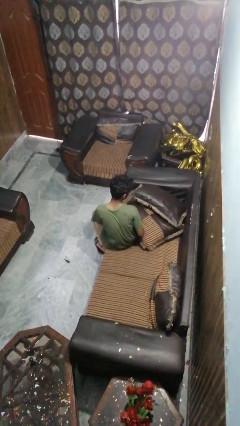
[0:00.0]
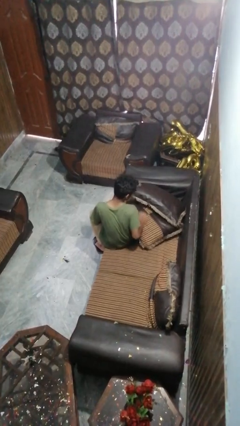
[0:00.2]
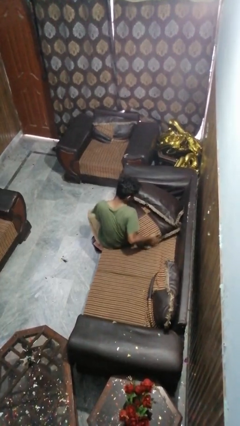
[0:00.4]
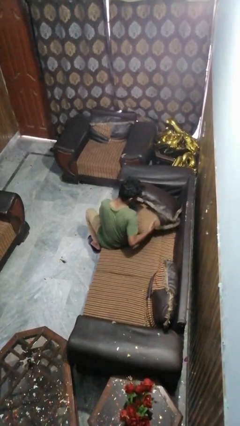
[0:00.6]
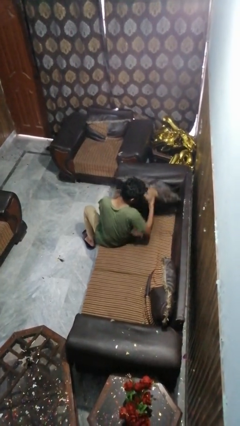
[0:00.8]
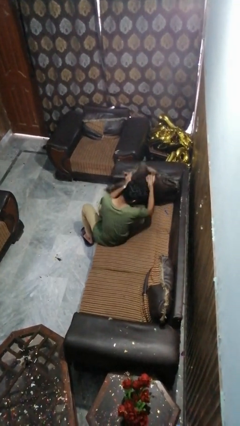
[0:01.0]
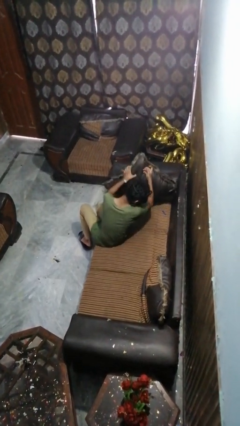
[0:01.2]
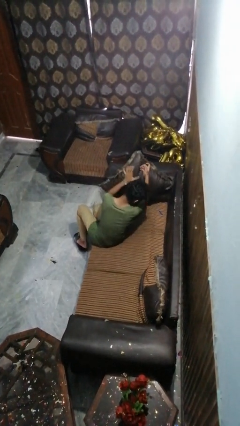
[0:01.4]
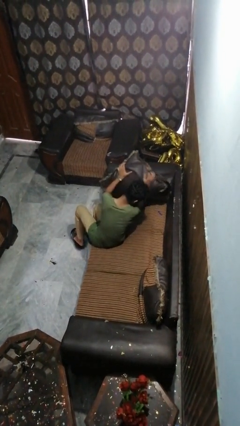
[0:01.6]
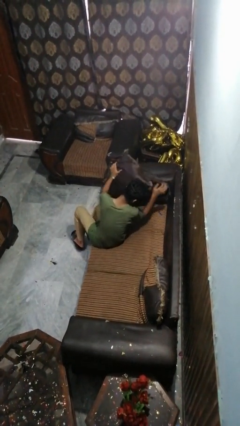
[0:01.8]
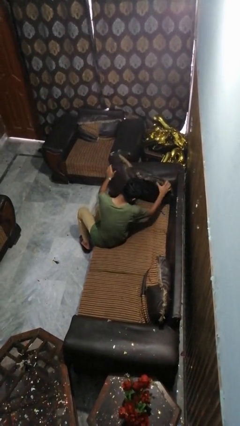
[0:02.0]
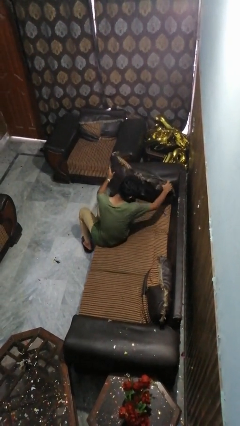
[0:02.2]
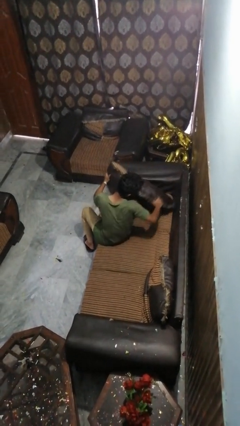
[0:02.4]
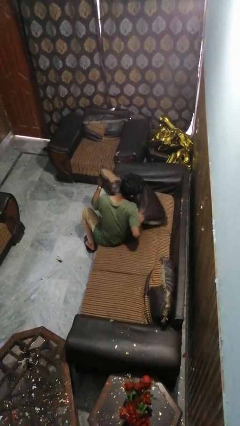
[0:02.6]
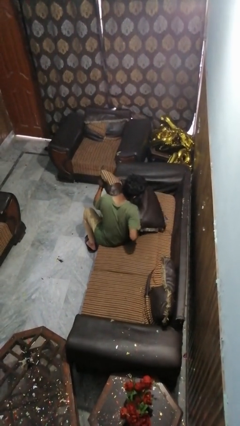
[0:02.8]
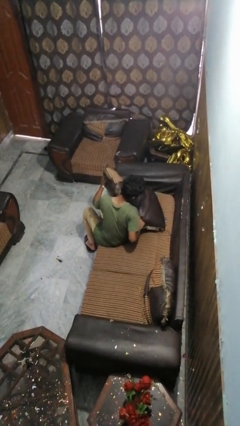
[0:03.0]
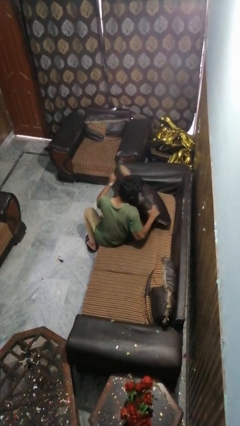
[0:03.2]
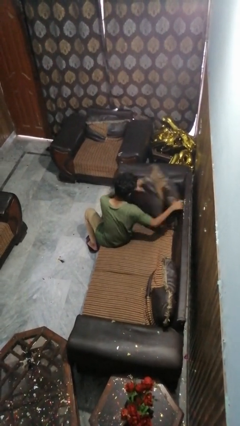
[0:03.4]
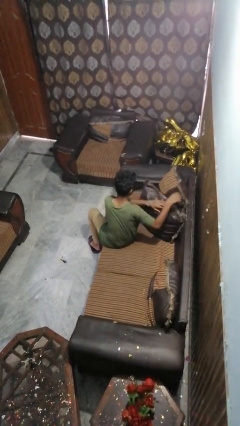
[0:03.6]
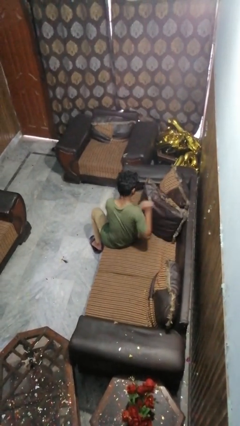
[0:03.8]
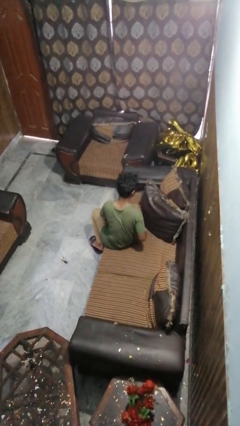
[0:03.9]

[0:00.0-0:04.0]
person searches in couch

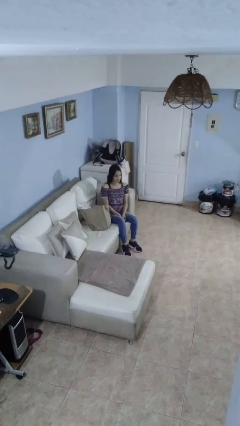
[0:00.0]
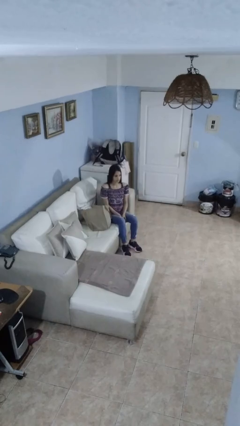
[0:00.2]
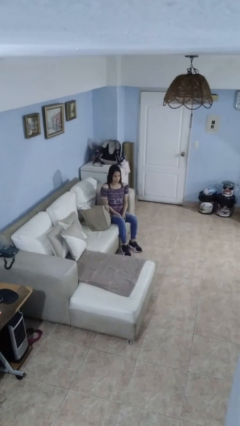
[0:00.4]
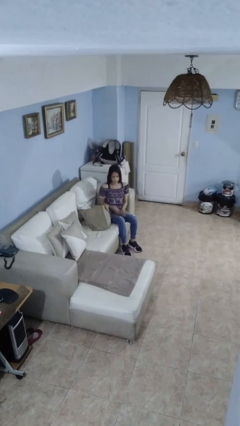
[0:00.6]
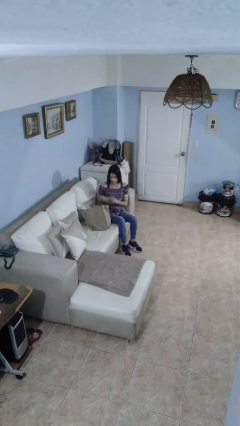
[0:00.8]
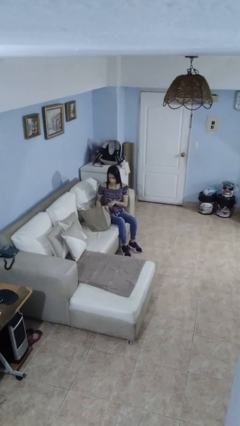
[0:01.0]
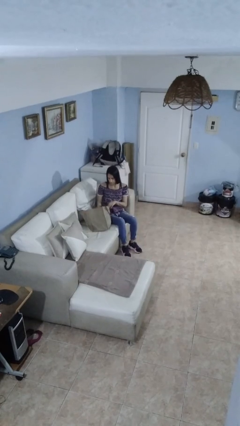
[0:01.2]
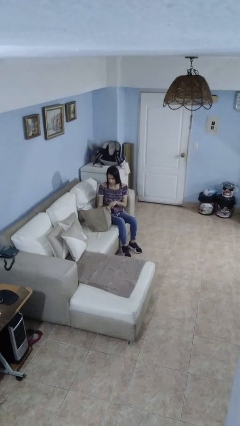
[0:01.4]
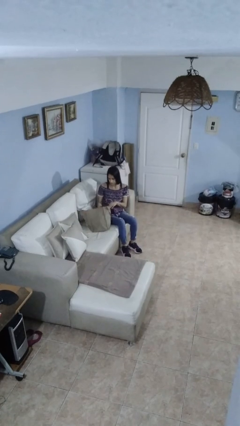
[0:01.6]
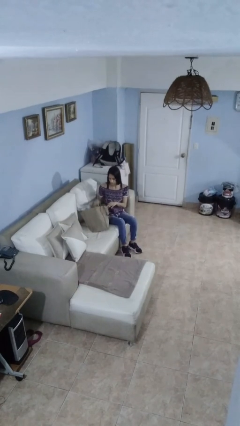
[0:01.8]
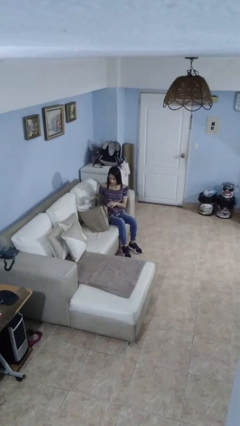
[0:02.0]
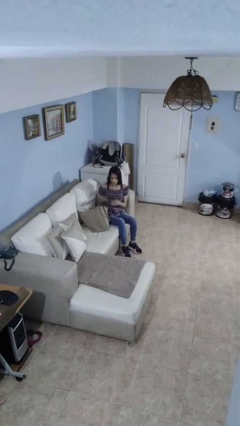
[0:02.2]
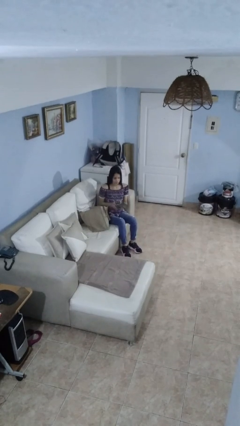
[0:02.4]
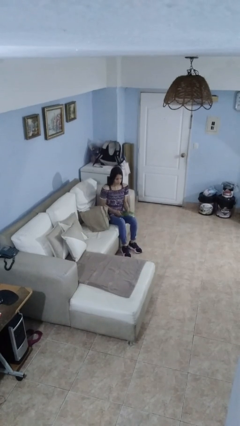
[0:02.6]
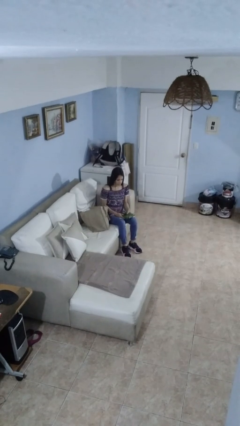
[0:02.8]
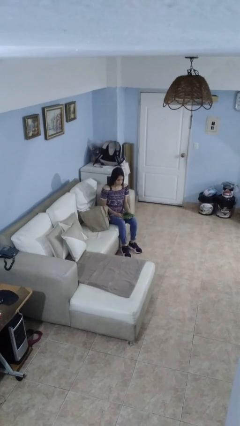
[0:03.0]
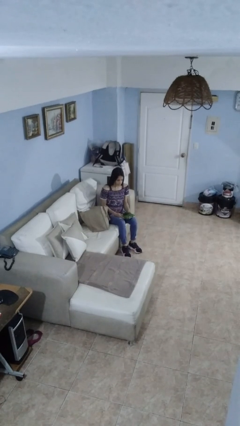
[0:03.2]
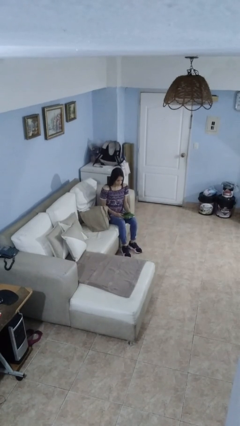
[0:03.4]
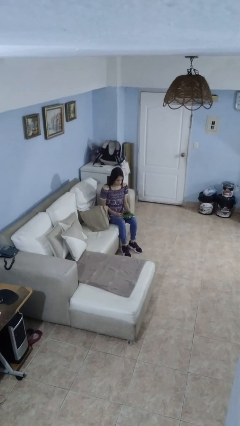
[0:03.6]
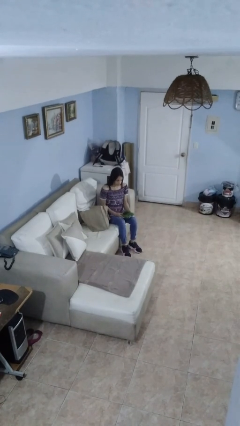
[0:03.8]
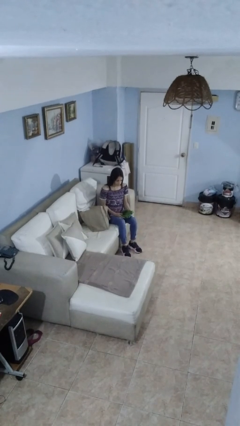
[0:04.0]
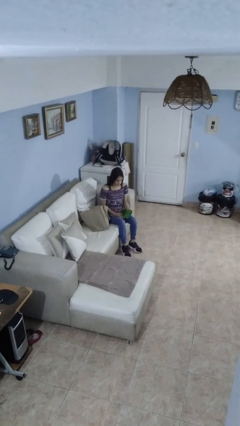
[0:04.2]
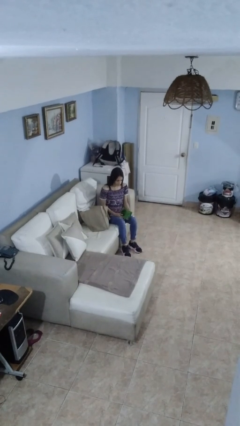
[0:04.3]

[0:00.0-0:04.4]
person takes object from bag

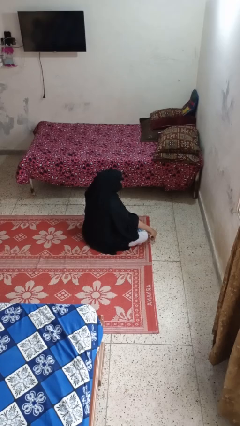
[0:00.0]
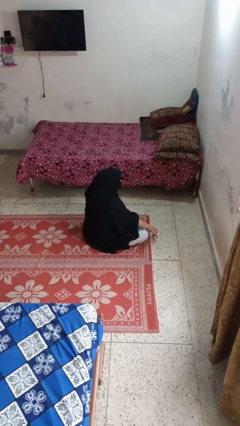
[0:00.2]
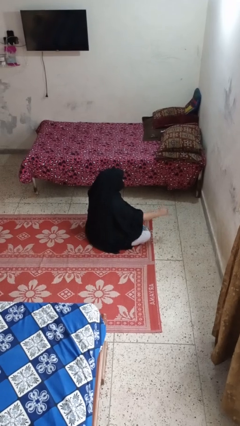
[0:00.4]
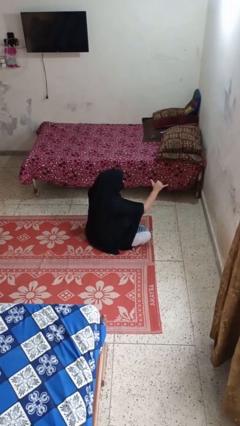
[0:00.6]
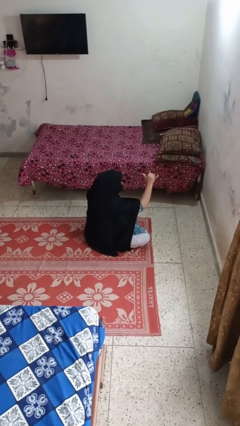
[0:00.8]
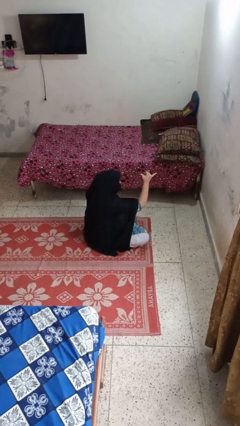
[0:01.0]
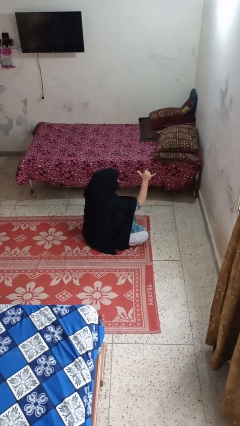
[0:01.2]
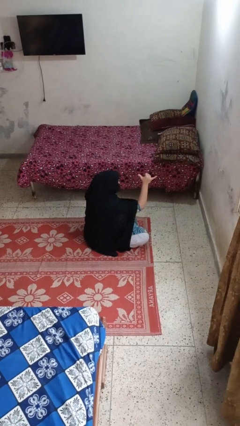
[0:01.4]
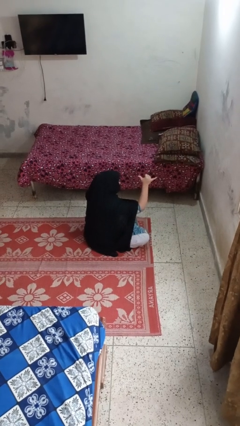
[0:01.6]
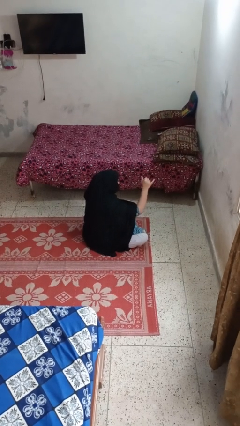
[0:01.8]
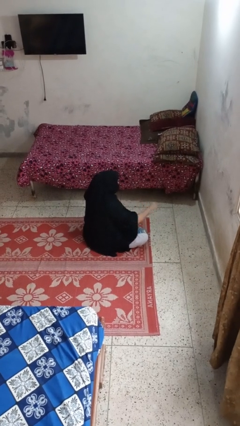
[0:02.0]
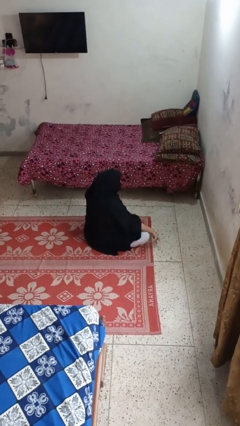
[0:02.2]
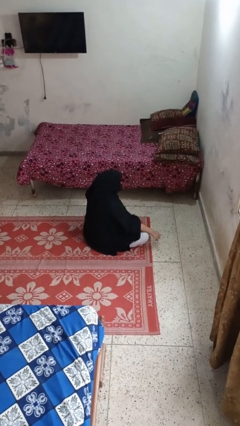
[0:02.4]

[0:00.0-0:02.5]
person gestures hang loose

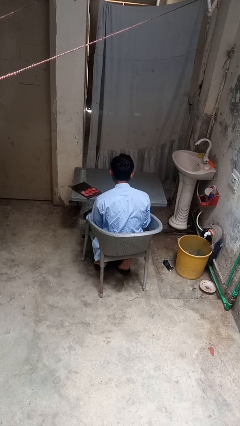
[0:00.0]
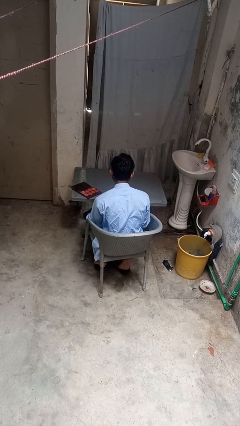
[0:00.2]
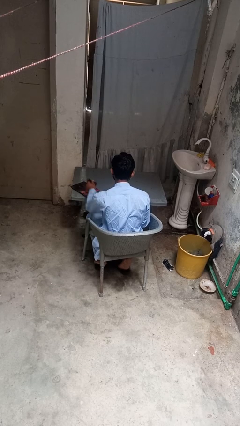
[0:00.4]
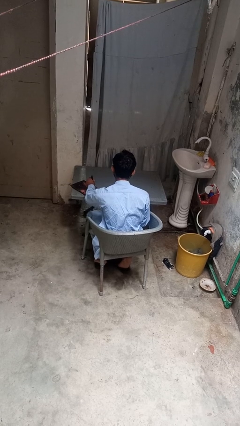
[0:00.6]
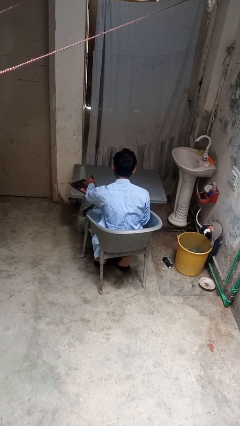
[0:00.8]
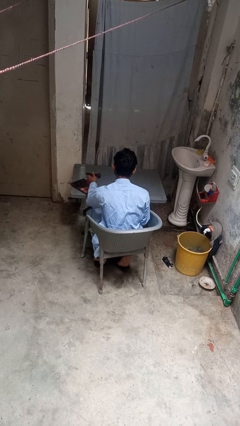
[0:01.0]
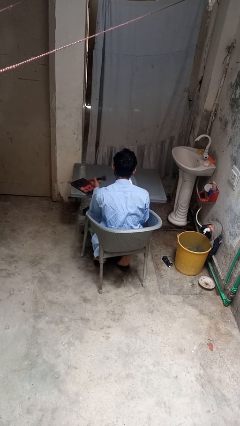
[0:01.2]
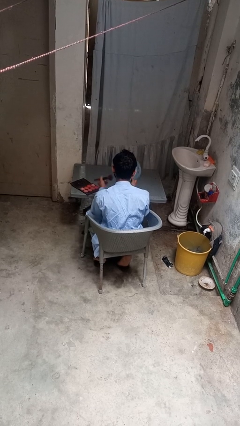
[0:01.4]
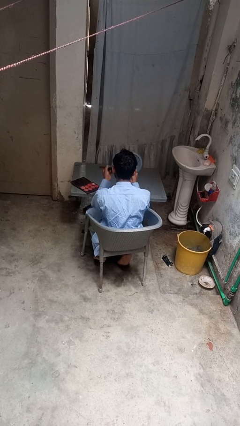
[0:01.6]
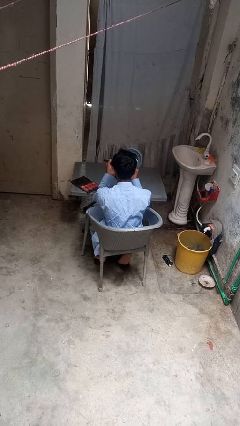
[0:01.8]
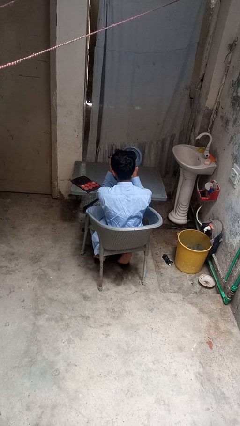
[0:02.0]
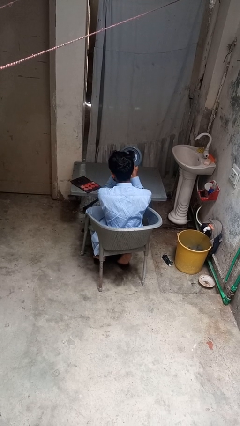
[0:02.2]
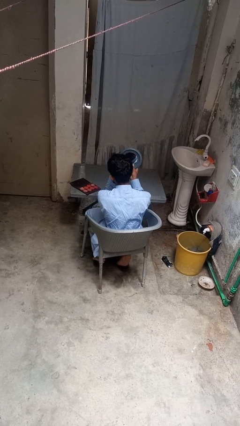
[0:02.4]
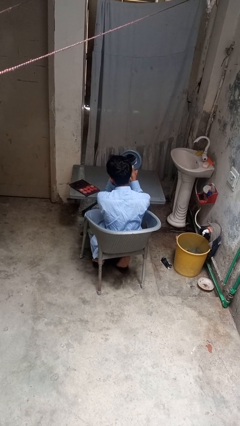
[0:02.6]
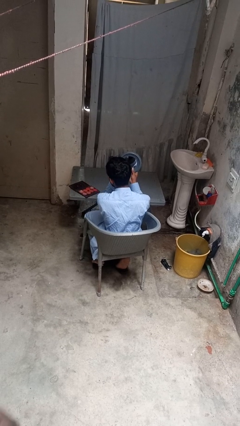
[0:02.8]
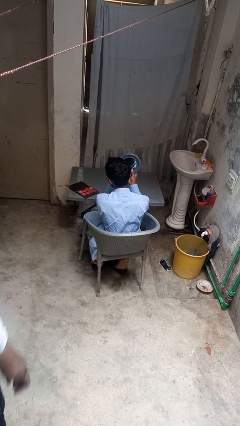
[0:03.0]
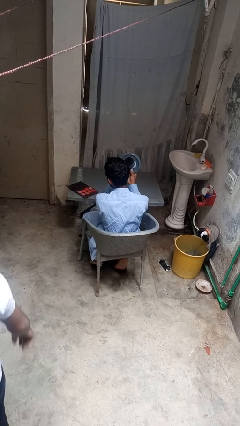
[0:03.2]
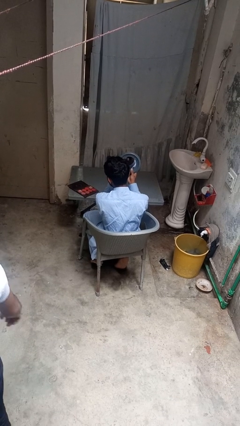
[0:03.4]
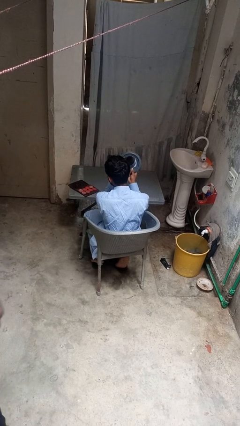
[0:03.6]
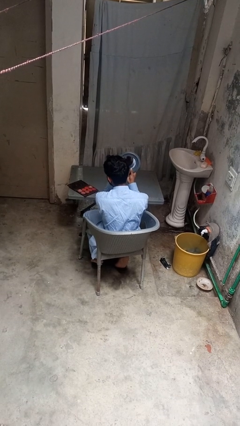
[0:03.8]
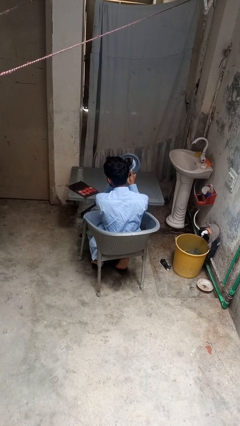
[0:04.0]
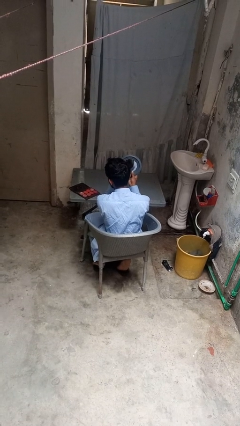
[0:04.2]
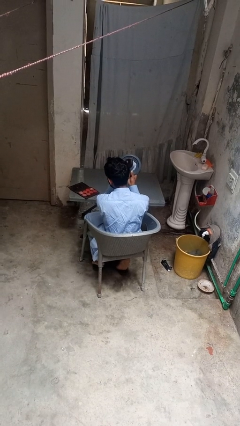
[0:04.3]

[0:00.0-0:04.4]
person applies eye makeup
